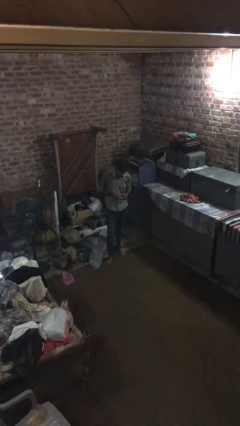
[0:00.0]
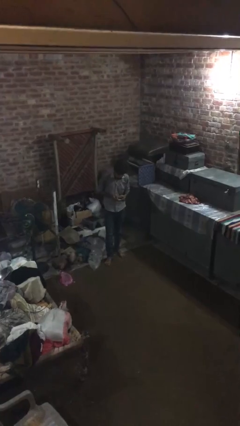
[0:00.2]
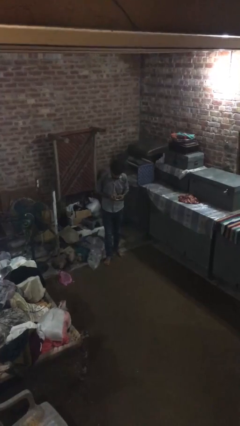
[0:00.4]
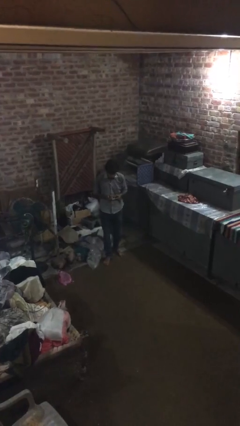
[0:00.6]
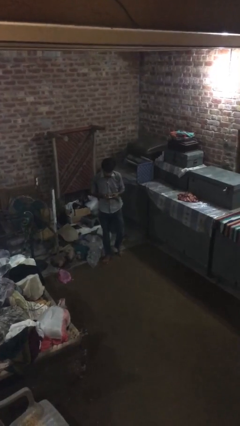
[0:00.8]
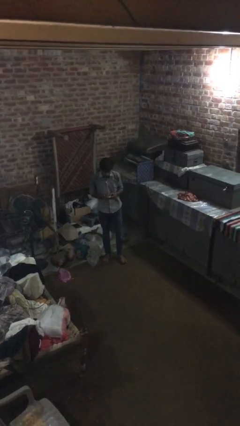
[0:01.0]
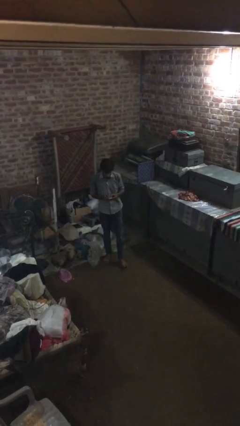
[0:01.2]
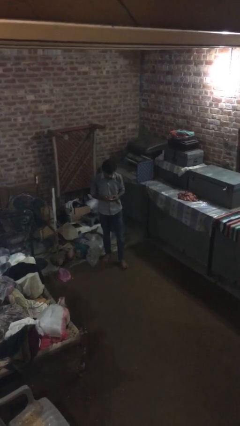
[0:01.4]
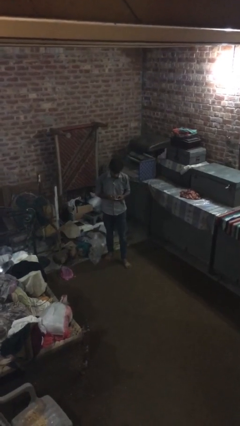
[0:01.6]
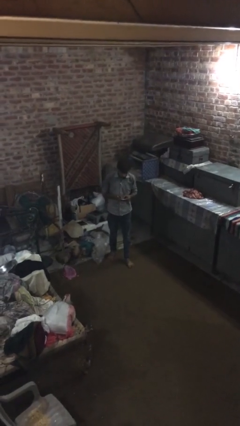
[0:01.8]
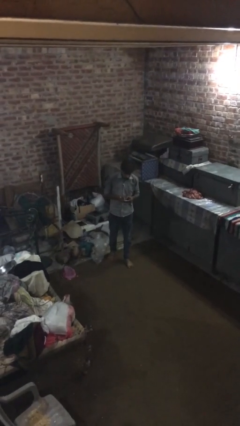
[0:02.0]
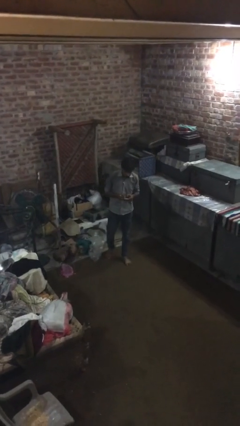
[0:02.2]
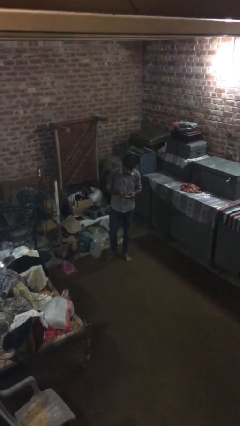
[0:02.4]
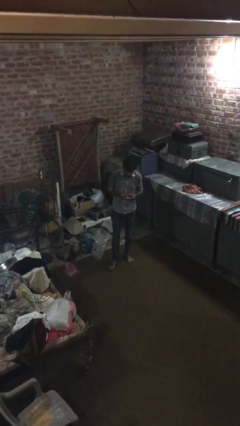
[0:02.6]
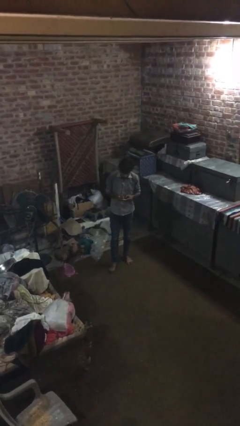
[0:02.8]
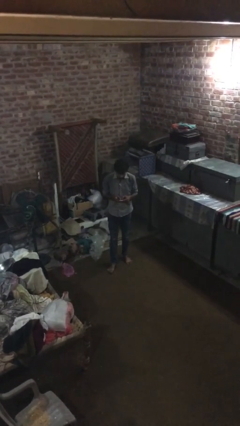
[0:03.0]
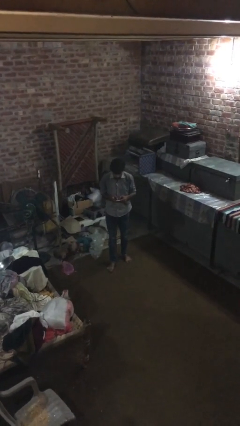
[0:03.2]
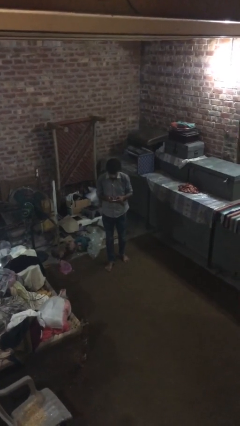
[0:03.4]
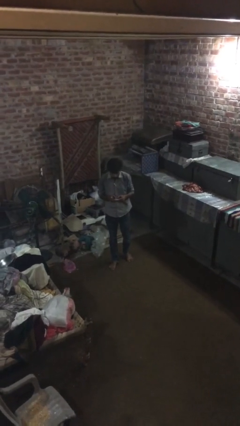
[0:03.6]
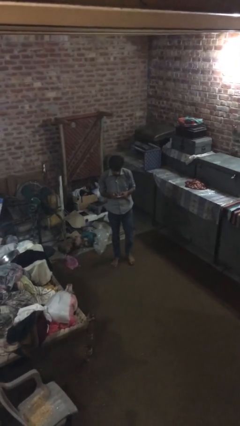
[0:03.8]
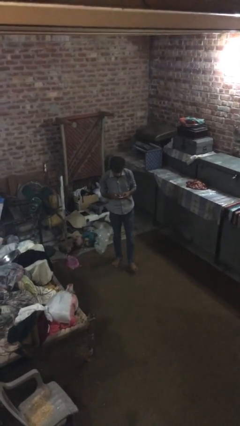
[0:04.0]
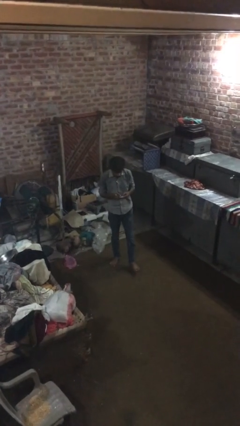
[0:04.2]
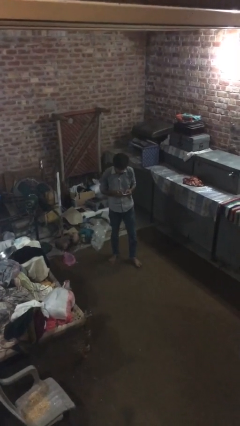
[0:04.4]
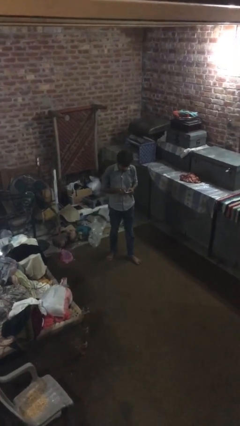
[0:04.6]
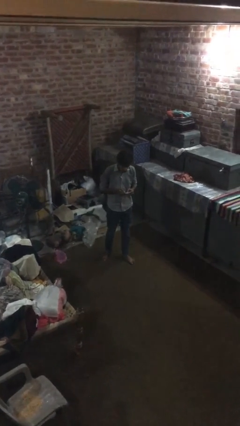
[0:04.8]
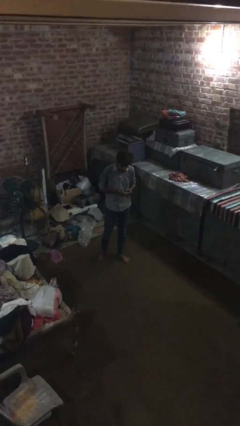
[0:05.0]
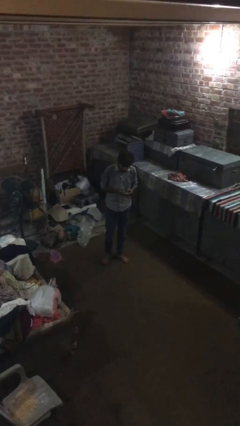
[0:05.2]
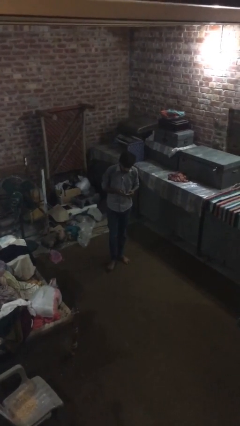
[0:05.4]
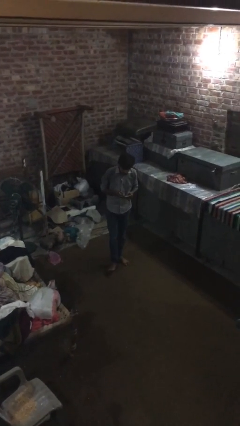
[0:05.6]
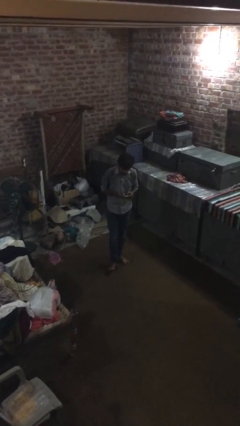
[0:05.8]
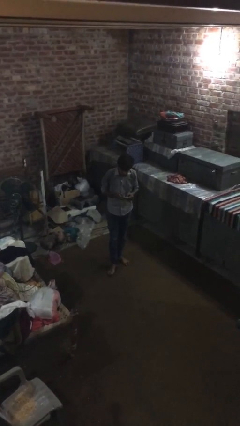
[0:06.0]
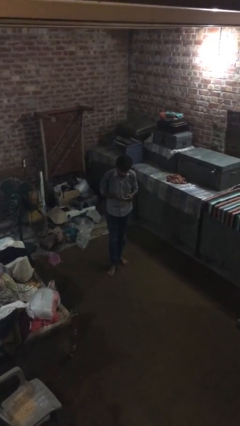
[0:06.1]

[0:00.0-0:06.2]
person texts on phone

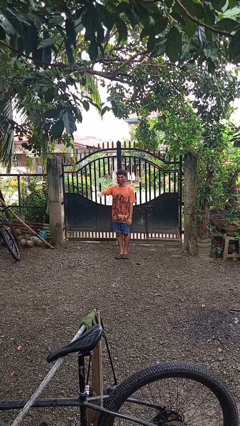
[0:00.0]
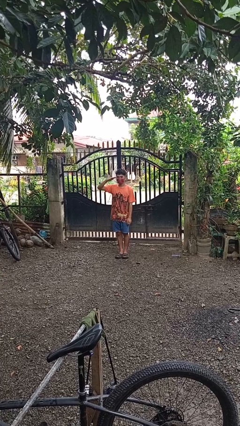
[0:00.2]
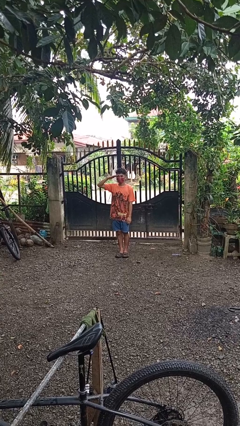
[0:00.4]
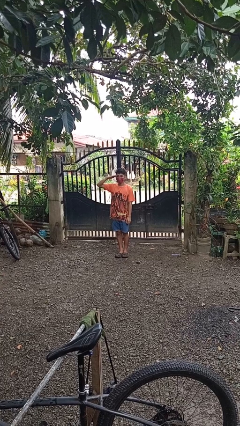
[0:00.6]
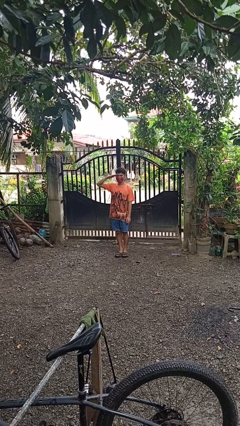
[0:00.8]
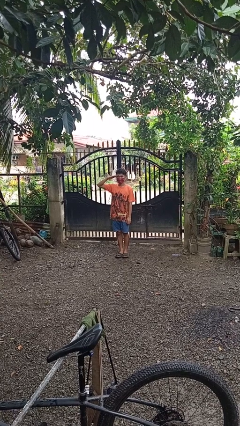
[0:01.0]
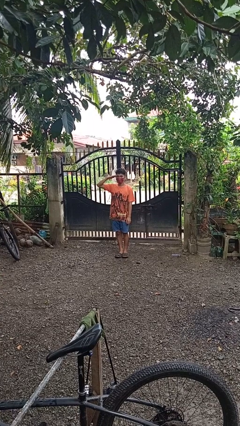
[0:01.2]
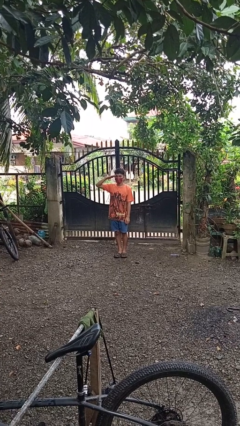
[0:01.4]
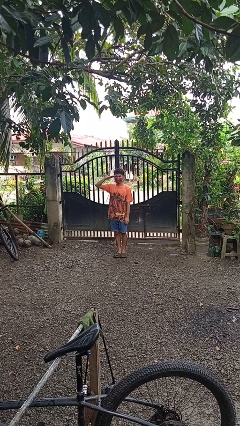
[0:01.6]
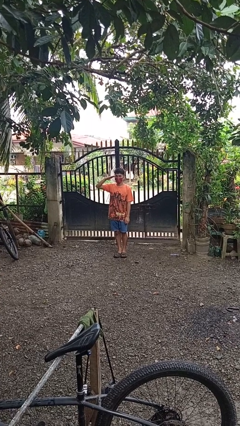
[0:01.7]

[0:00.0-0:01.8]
person salutes

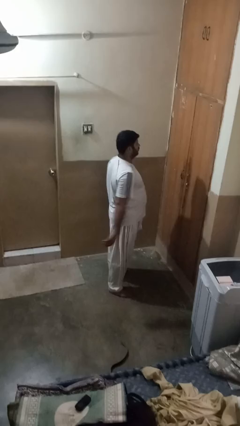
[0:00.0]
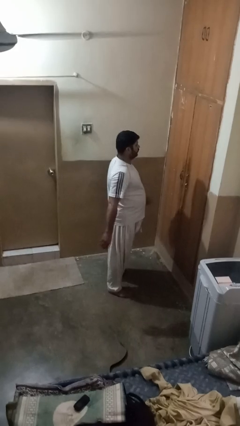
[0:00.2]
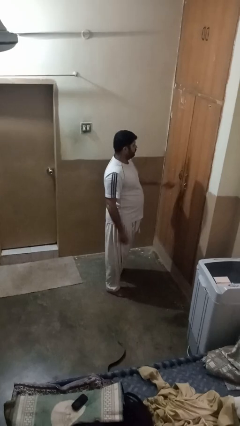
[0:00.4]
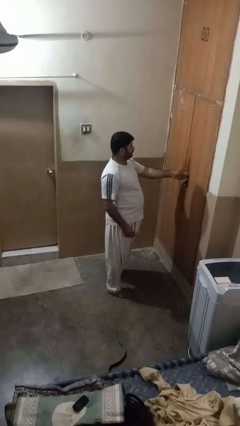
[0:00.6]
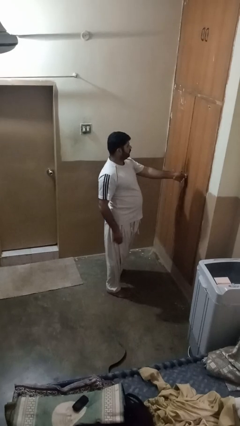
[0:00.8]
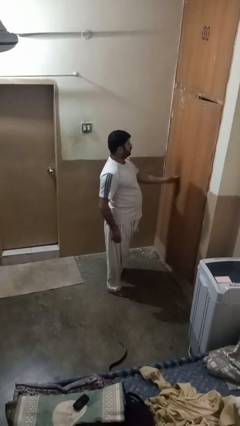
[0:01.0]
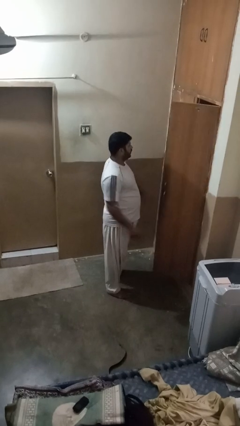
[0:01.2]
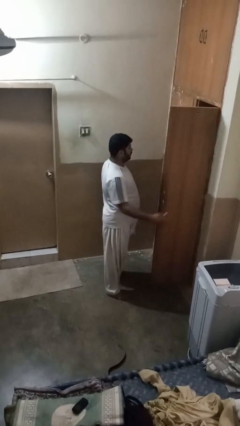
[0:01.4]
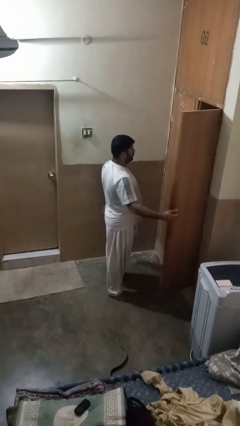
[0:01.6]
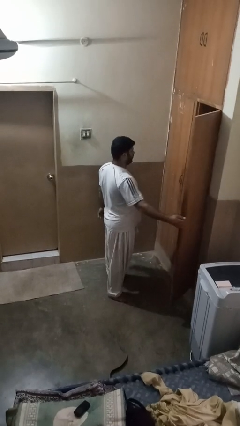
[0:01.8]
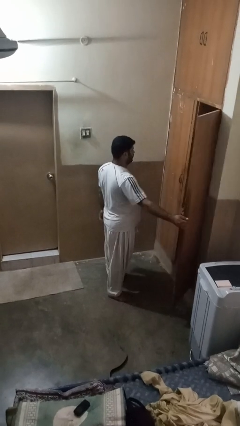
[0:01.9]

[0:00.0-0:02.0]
person opens closet door

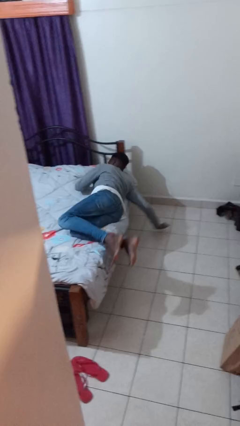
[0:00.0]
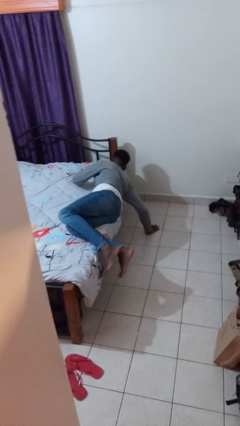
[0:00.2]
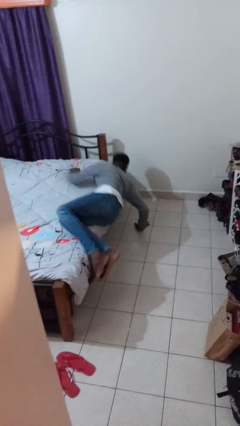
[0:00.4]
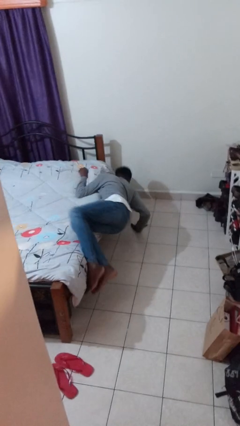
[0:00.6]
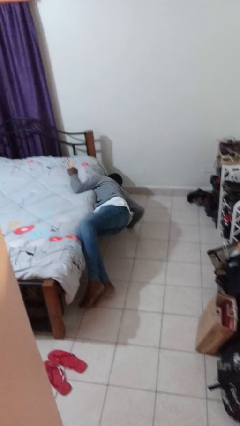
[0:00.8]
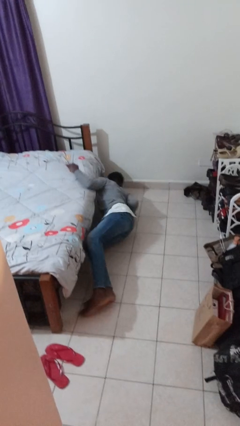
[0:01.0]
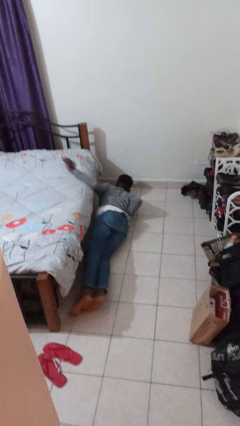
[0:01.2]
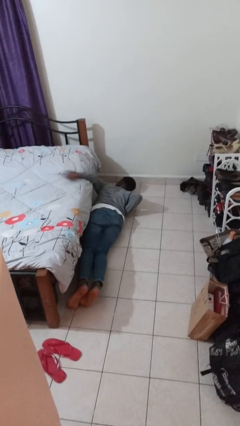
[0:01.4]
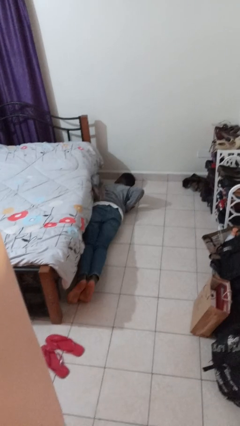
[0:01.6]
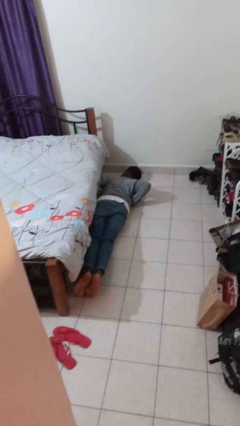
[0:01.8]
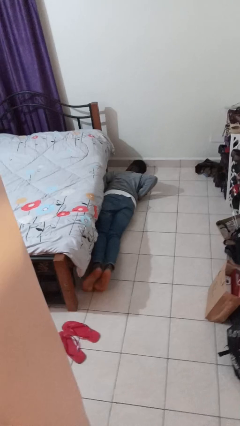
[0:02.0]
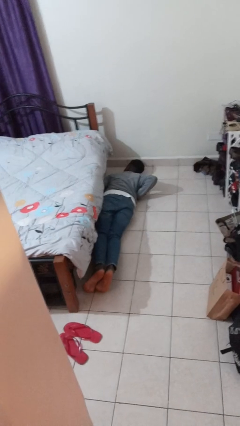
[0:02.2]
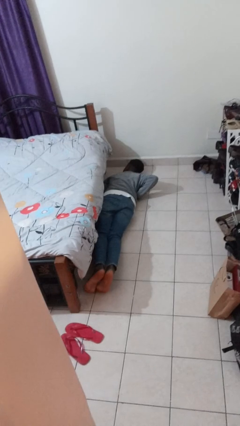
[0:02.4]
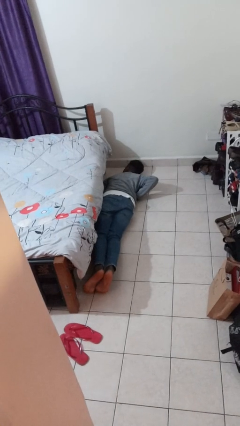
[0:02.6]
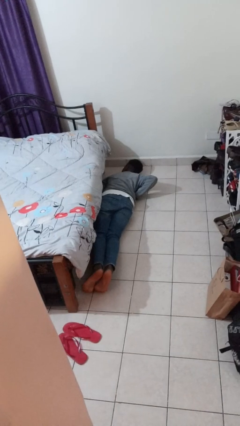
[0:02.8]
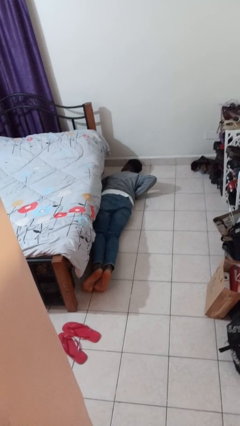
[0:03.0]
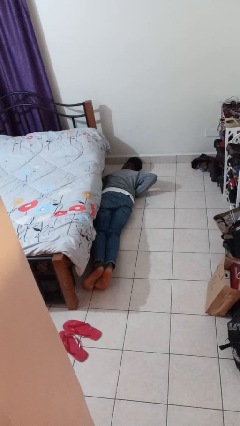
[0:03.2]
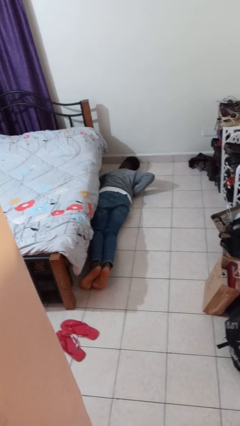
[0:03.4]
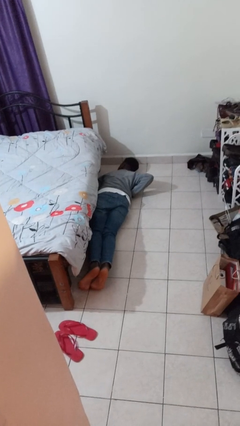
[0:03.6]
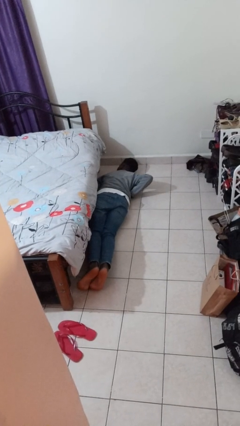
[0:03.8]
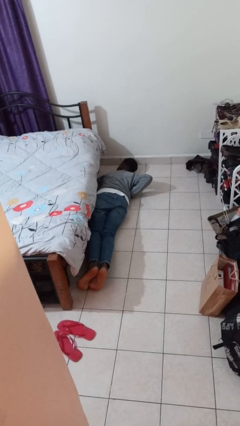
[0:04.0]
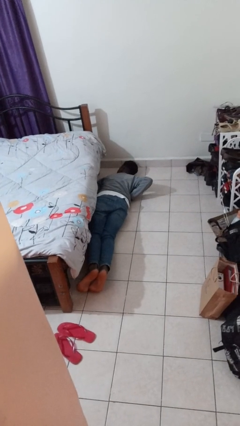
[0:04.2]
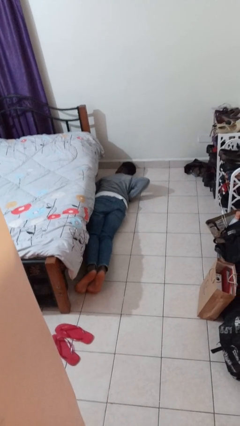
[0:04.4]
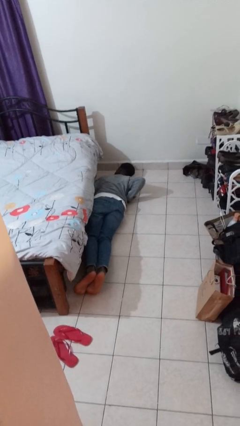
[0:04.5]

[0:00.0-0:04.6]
person falls from bed

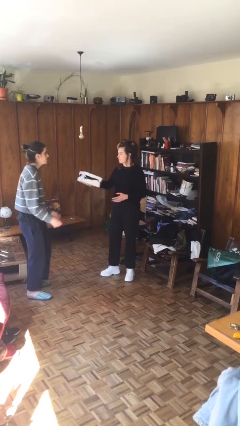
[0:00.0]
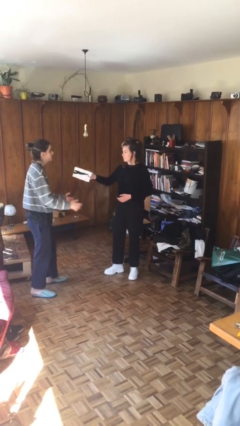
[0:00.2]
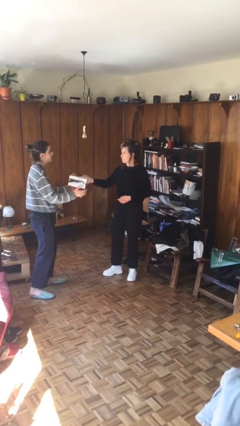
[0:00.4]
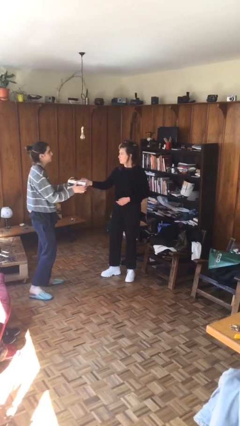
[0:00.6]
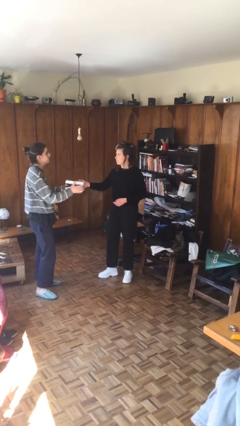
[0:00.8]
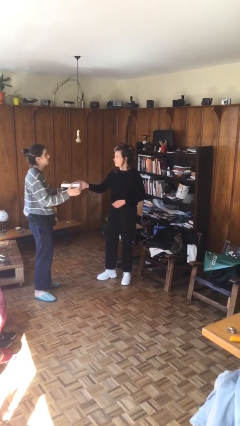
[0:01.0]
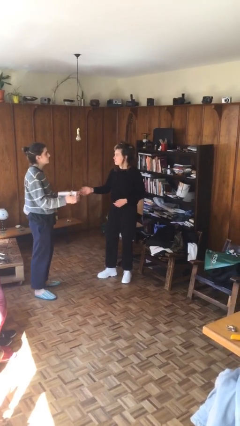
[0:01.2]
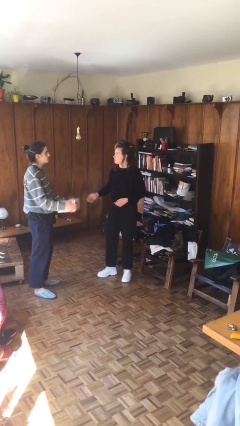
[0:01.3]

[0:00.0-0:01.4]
person transfers object to person

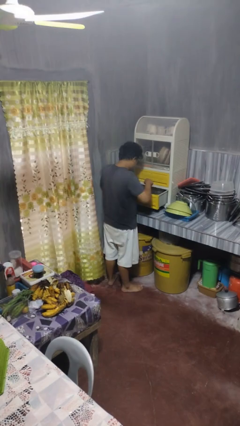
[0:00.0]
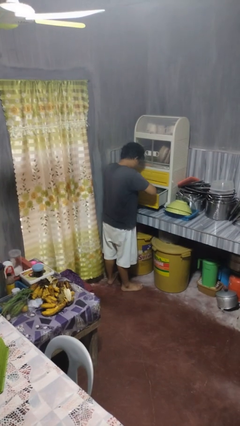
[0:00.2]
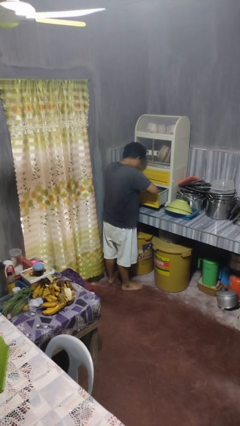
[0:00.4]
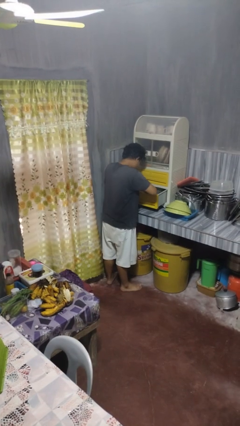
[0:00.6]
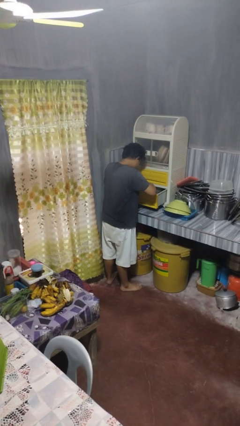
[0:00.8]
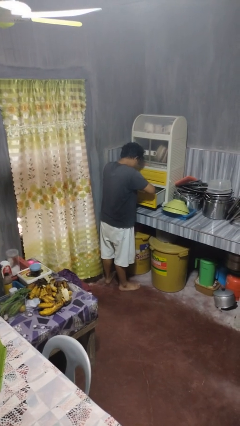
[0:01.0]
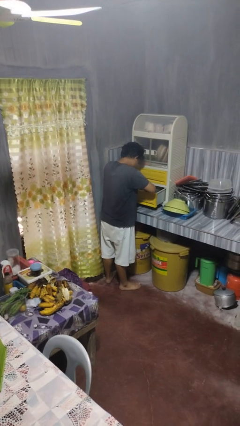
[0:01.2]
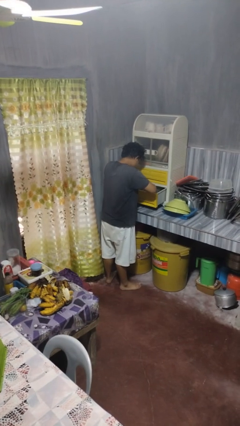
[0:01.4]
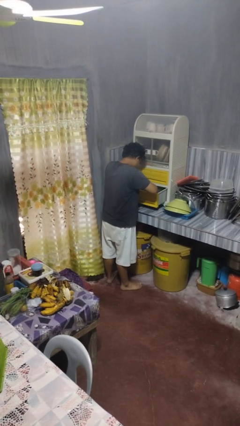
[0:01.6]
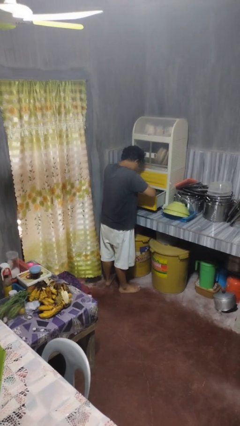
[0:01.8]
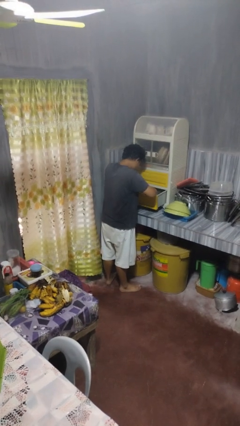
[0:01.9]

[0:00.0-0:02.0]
person searches in kitchen drawer
